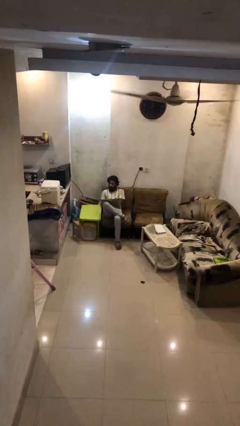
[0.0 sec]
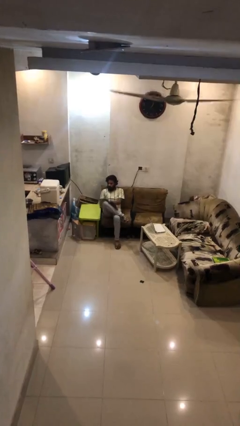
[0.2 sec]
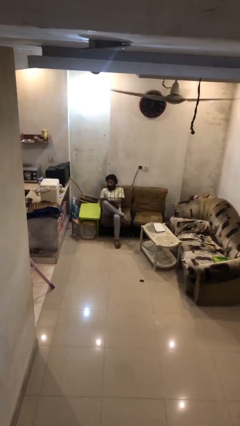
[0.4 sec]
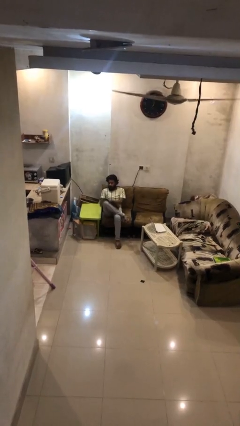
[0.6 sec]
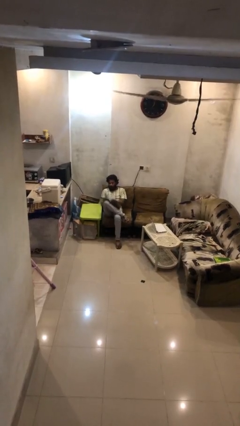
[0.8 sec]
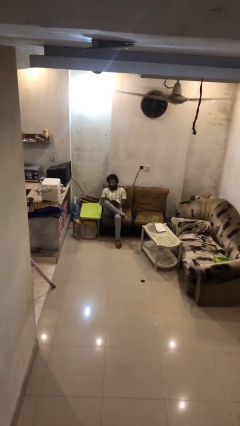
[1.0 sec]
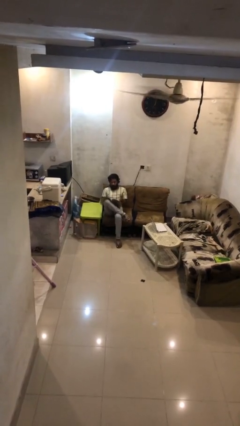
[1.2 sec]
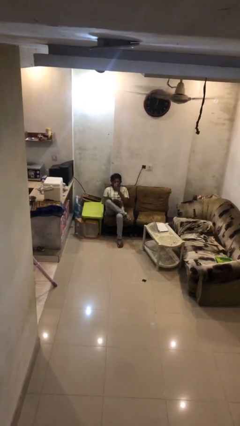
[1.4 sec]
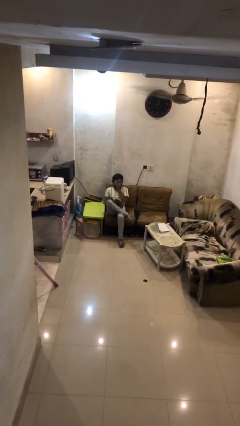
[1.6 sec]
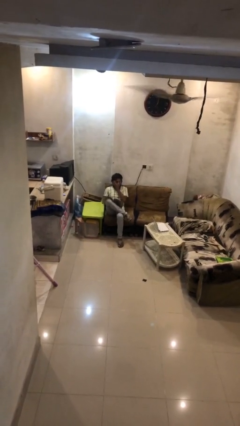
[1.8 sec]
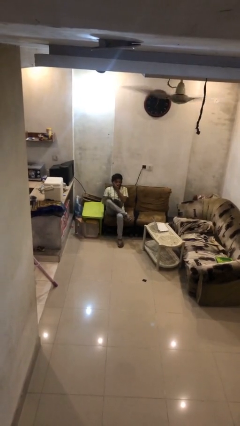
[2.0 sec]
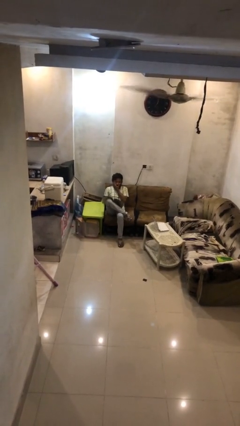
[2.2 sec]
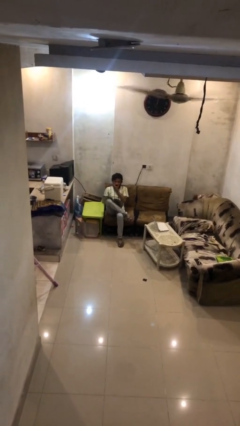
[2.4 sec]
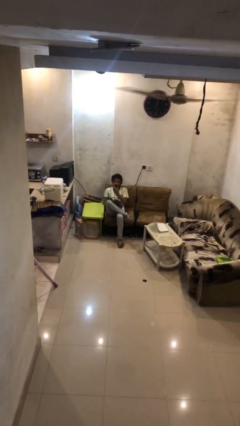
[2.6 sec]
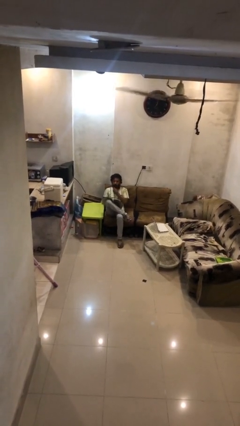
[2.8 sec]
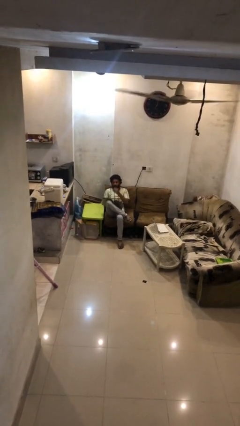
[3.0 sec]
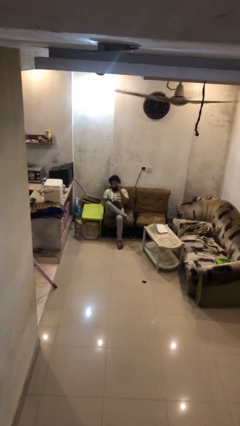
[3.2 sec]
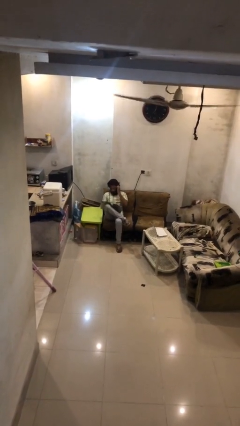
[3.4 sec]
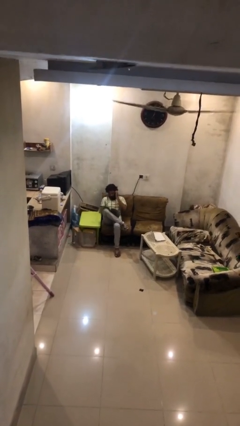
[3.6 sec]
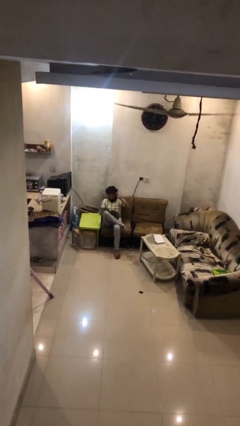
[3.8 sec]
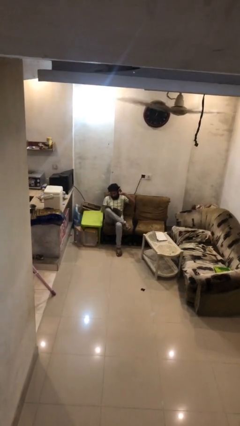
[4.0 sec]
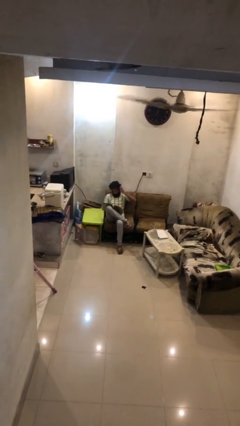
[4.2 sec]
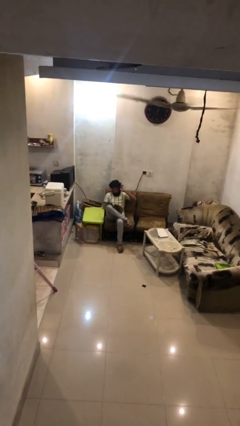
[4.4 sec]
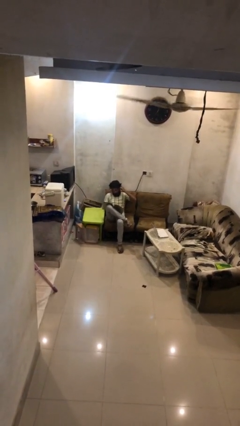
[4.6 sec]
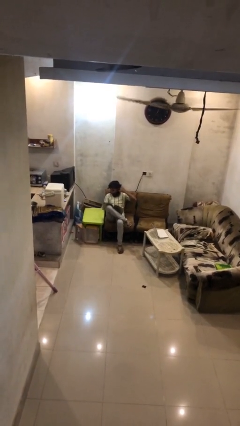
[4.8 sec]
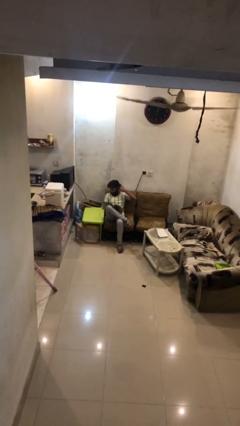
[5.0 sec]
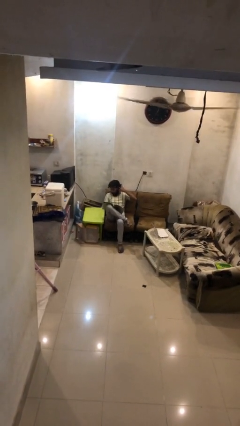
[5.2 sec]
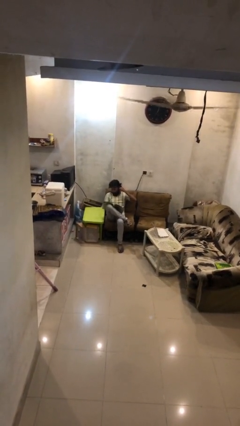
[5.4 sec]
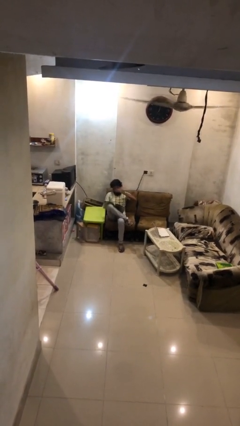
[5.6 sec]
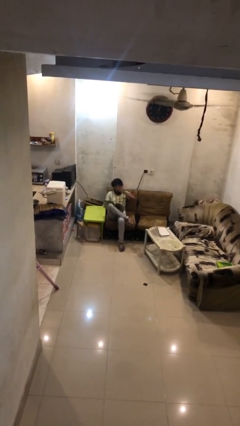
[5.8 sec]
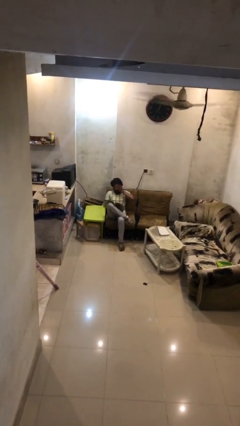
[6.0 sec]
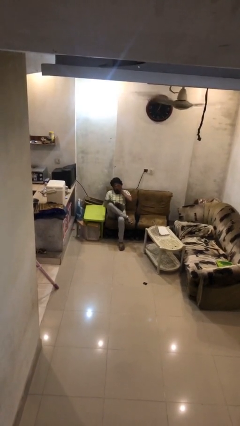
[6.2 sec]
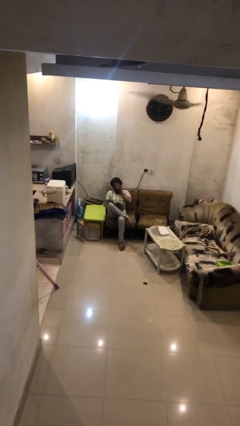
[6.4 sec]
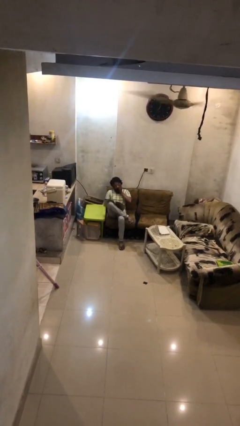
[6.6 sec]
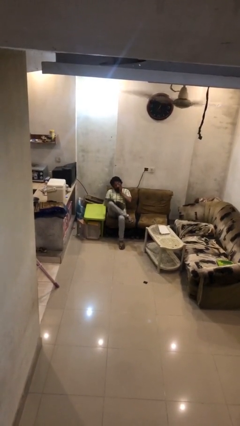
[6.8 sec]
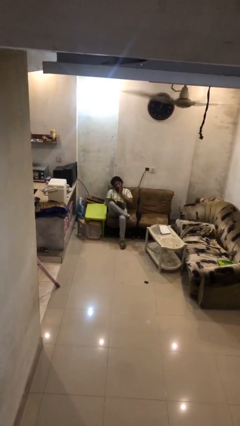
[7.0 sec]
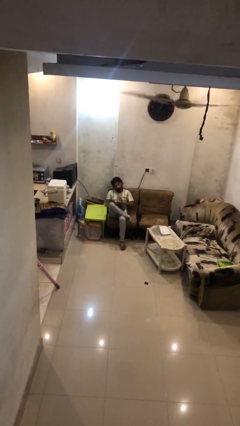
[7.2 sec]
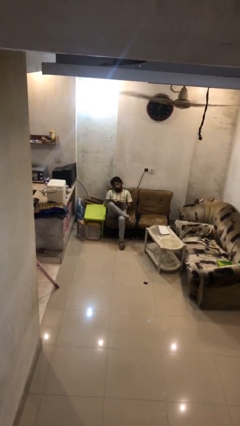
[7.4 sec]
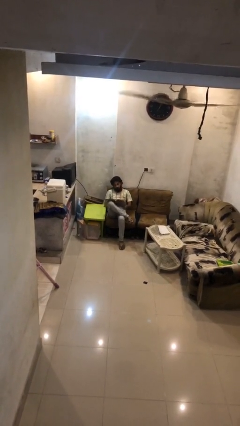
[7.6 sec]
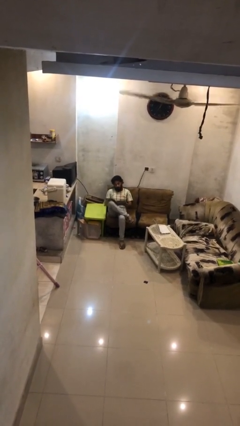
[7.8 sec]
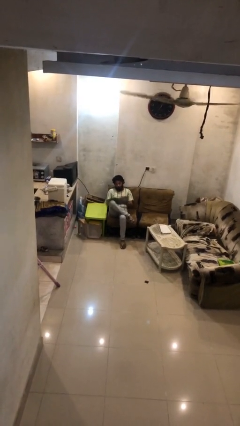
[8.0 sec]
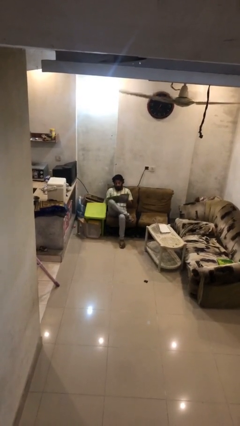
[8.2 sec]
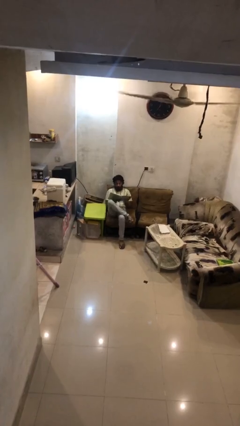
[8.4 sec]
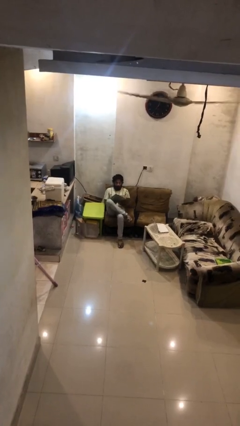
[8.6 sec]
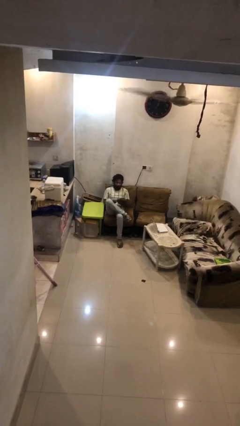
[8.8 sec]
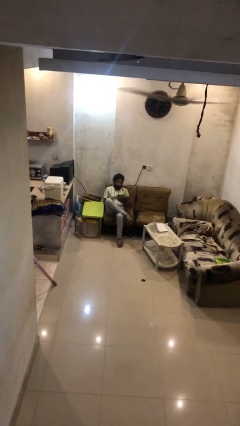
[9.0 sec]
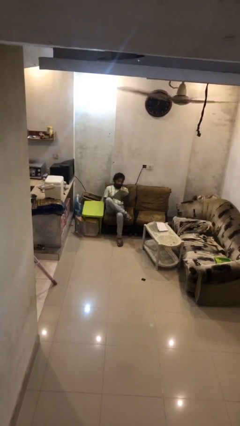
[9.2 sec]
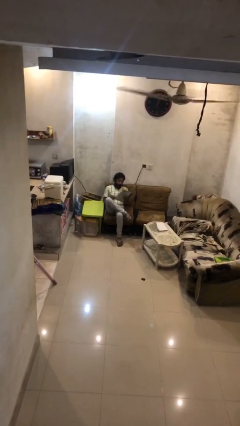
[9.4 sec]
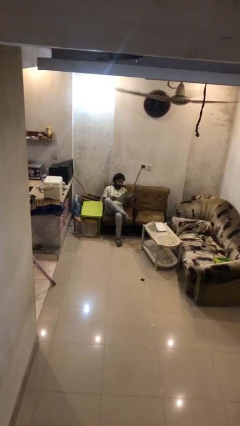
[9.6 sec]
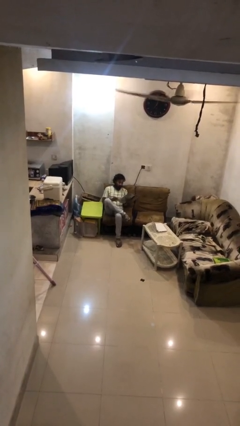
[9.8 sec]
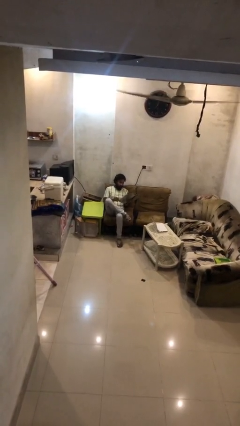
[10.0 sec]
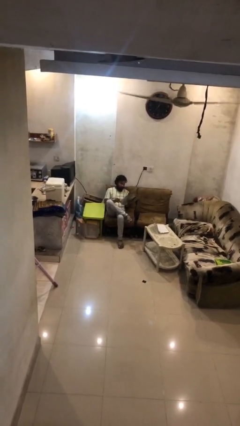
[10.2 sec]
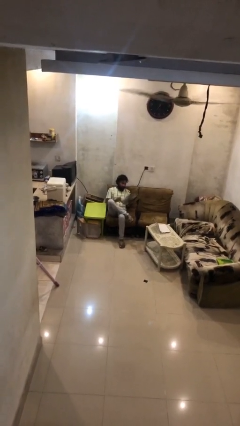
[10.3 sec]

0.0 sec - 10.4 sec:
person reads document

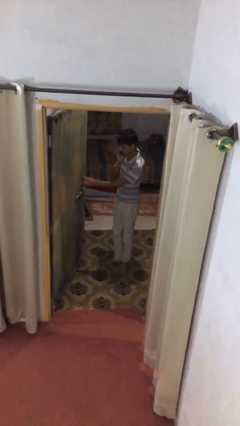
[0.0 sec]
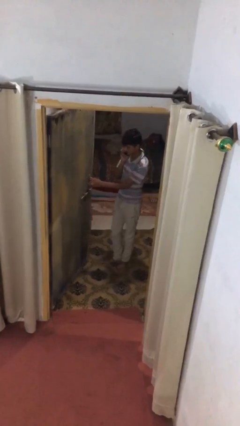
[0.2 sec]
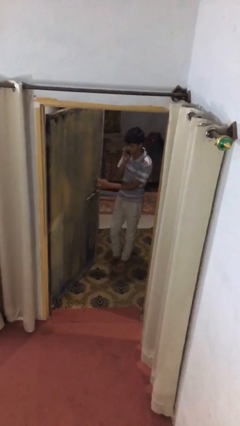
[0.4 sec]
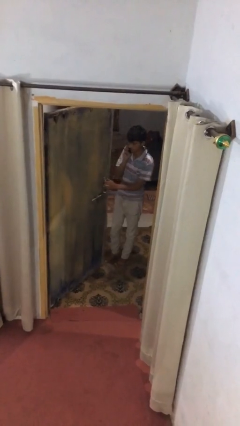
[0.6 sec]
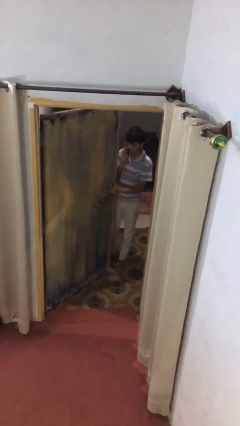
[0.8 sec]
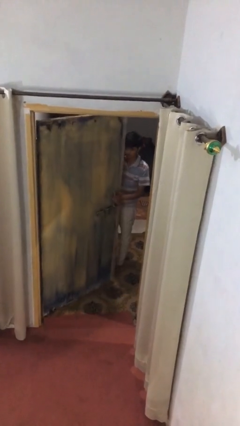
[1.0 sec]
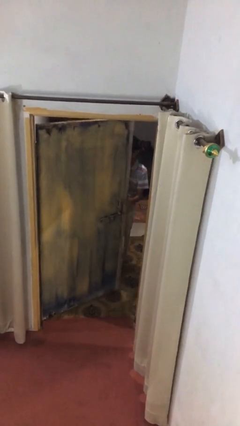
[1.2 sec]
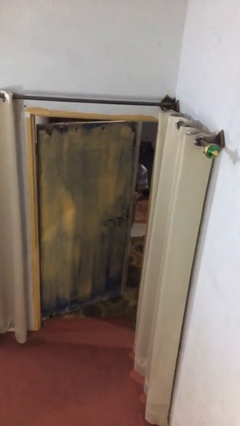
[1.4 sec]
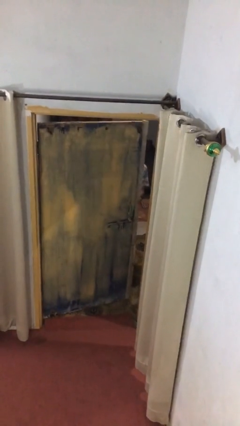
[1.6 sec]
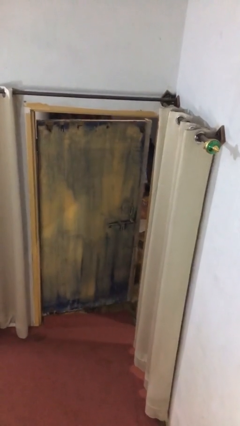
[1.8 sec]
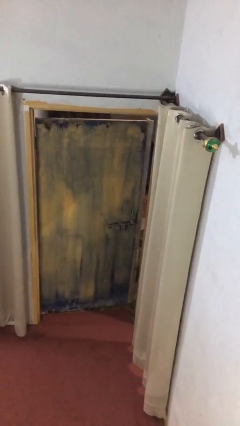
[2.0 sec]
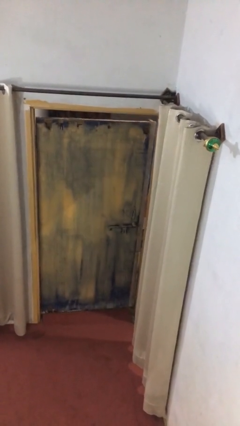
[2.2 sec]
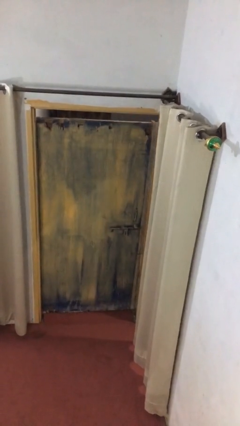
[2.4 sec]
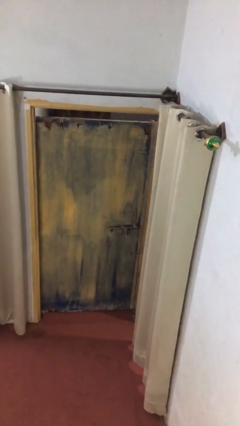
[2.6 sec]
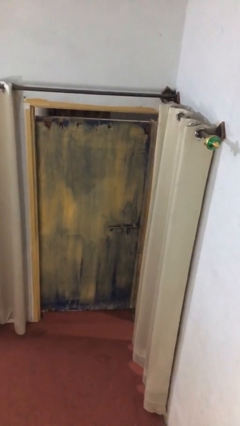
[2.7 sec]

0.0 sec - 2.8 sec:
person closes facility door

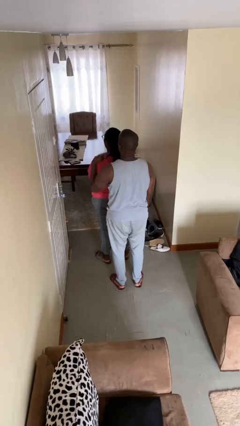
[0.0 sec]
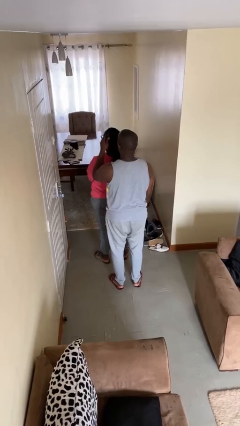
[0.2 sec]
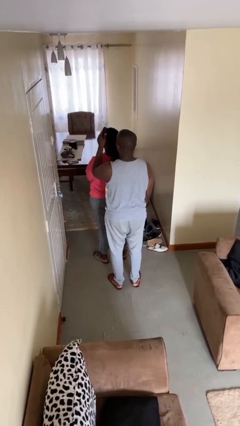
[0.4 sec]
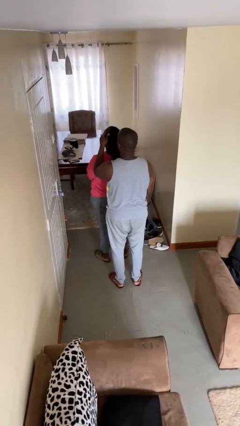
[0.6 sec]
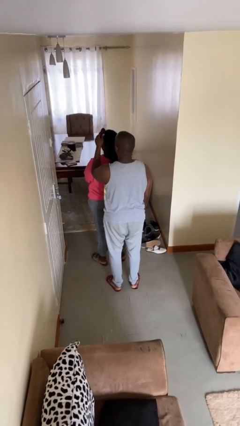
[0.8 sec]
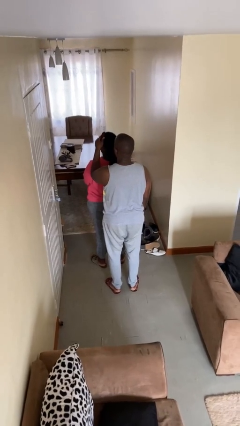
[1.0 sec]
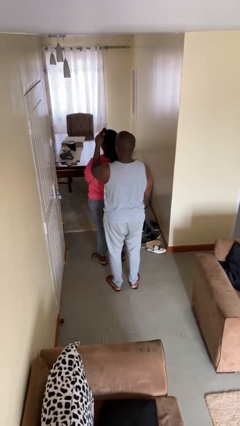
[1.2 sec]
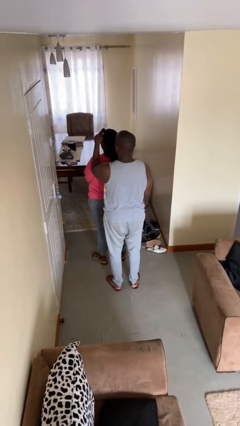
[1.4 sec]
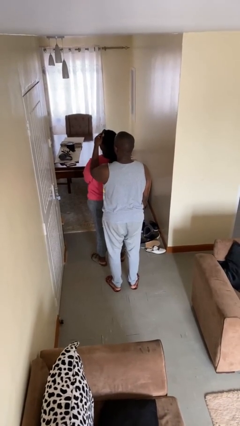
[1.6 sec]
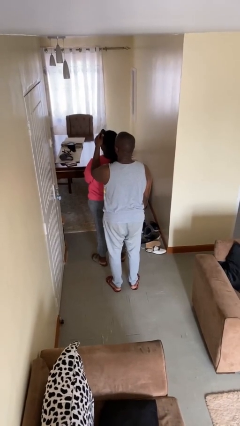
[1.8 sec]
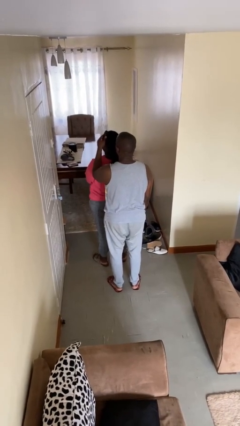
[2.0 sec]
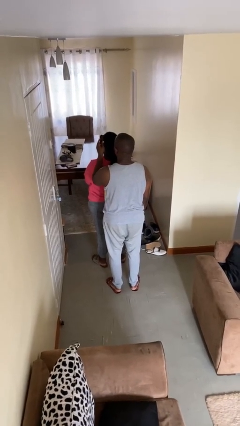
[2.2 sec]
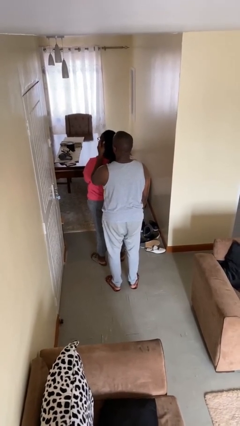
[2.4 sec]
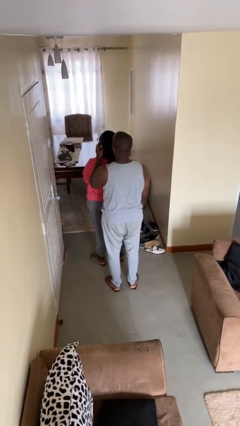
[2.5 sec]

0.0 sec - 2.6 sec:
person brushes hair of person

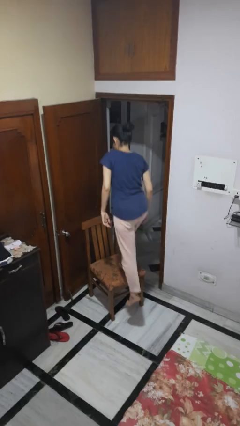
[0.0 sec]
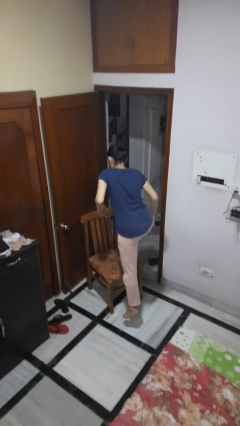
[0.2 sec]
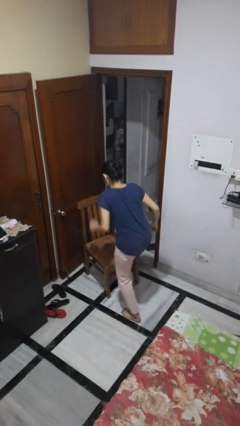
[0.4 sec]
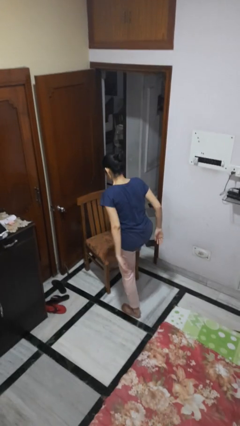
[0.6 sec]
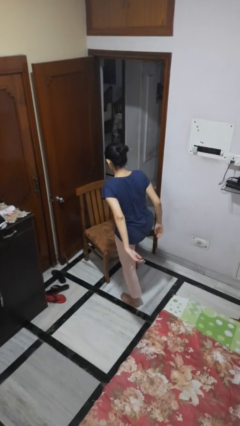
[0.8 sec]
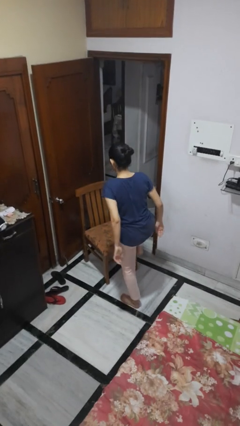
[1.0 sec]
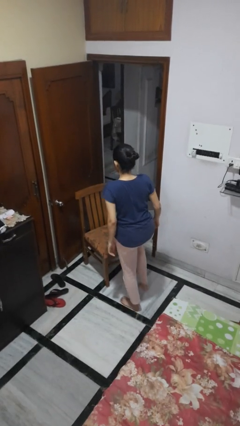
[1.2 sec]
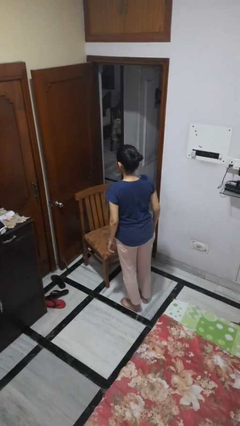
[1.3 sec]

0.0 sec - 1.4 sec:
person climbs off chair

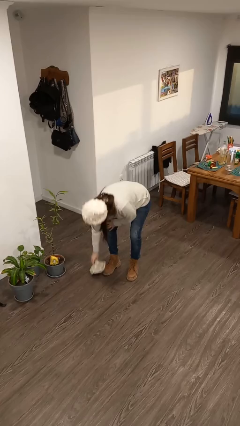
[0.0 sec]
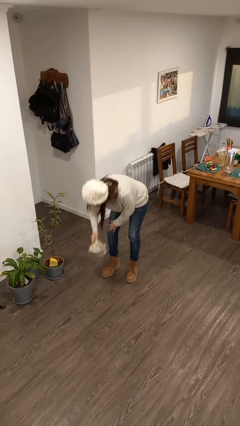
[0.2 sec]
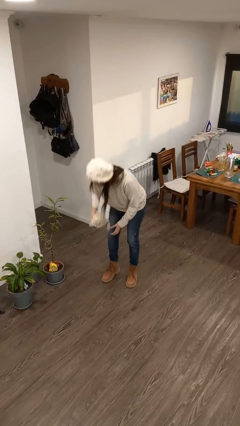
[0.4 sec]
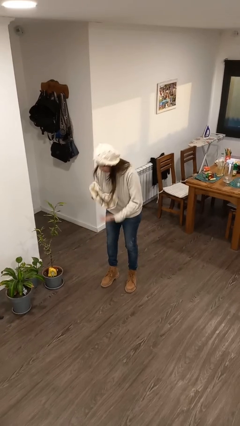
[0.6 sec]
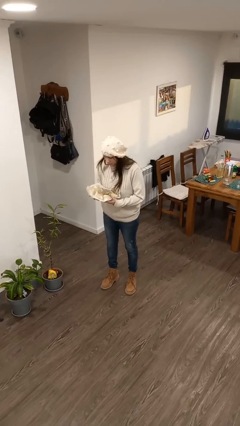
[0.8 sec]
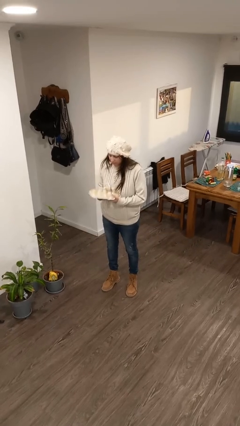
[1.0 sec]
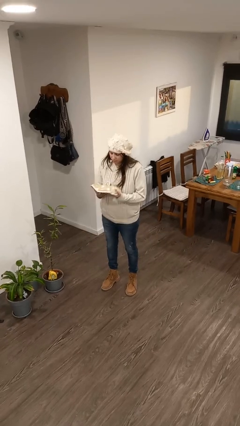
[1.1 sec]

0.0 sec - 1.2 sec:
person picks up object from floor
